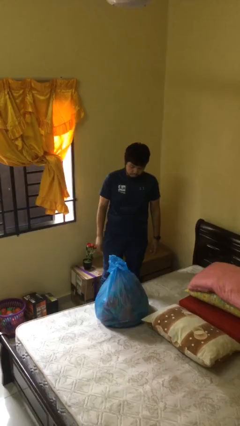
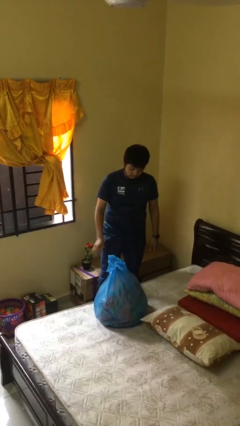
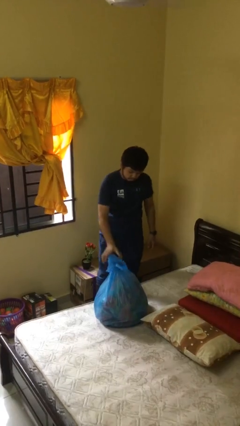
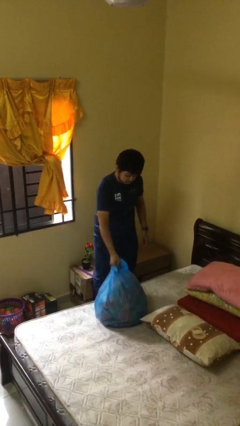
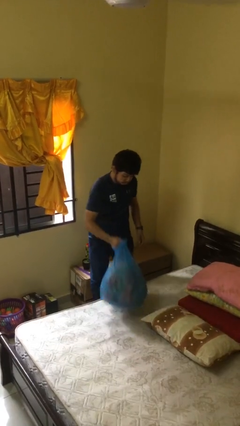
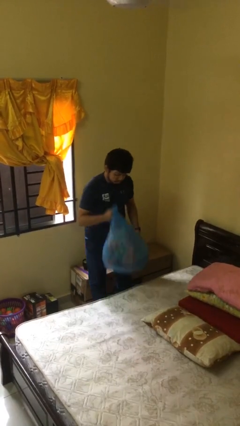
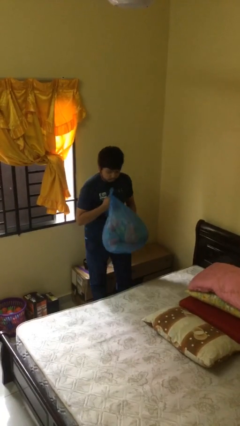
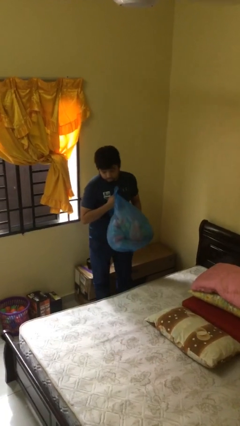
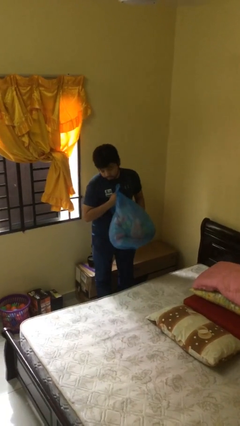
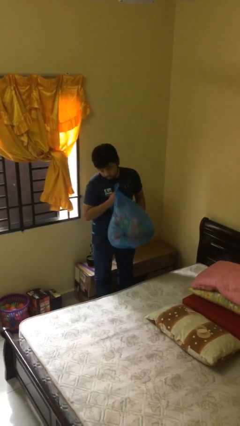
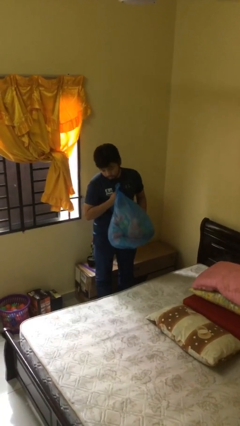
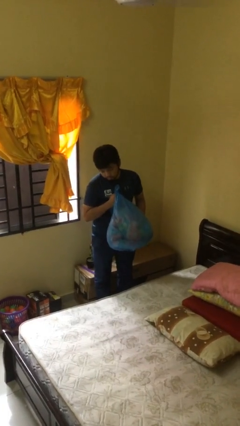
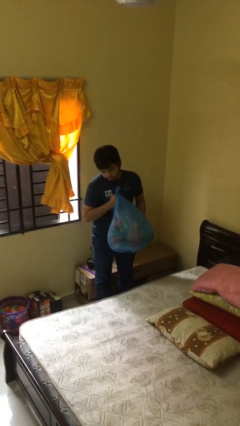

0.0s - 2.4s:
person picks up object from bed

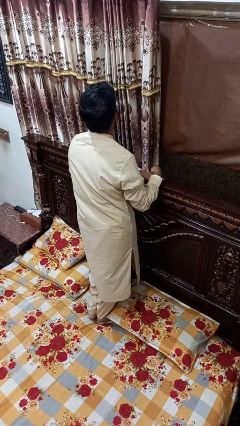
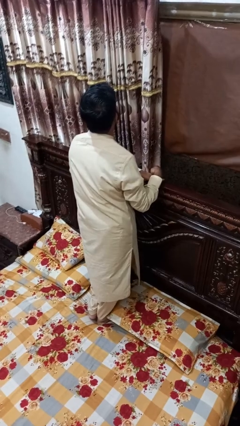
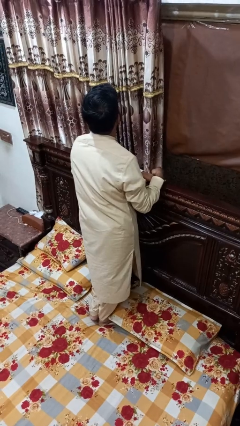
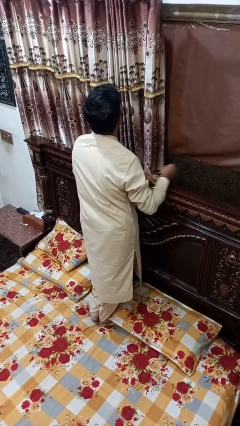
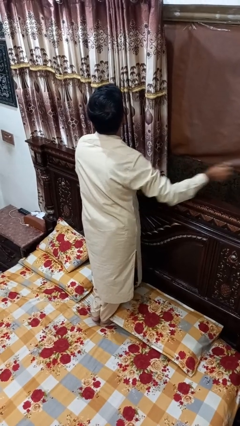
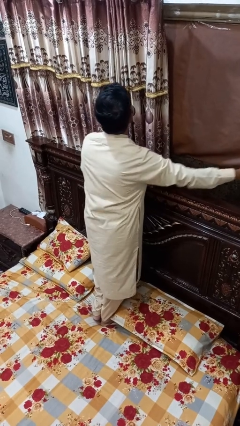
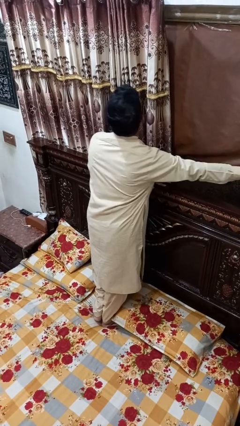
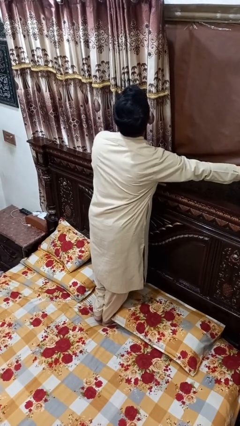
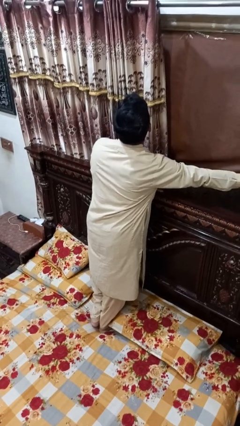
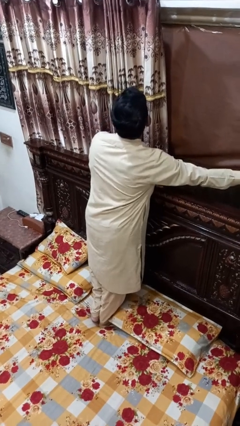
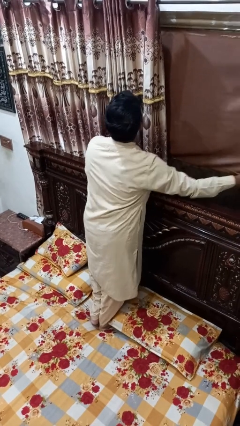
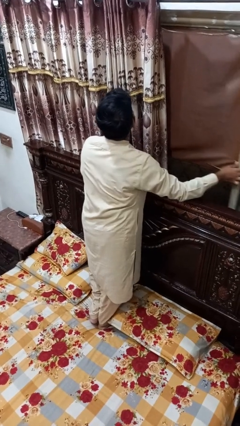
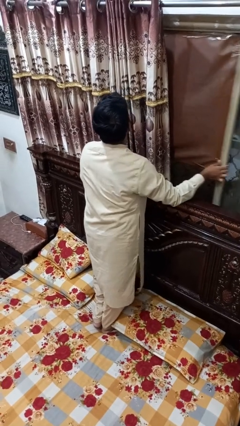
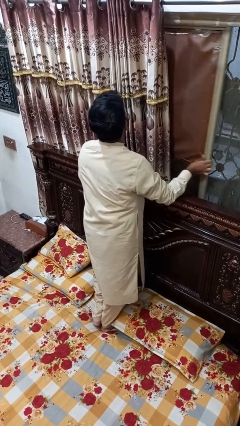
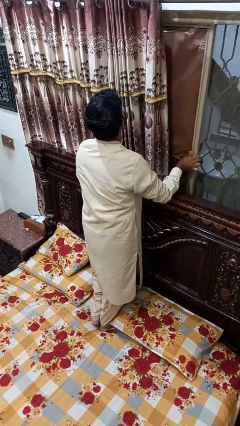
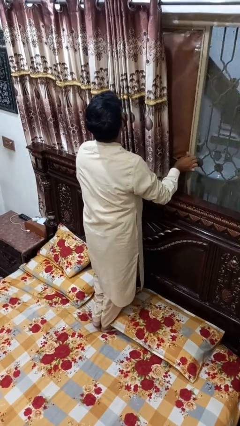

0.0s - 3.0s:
person opens home window

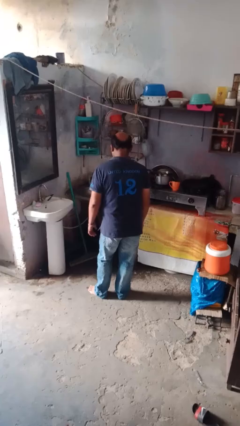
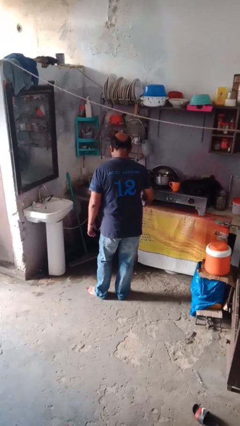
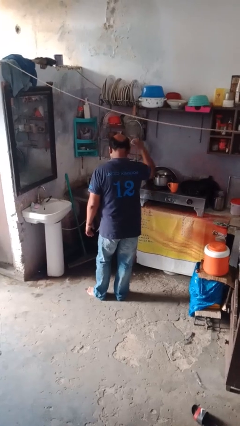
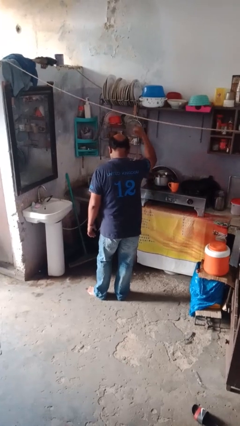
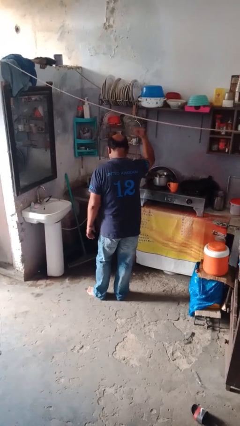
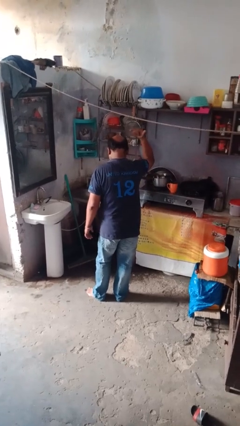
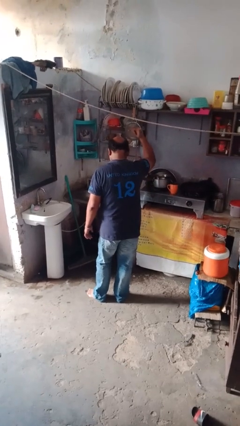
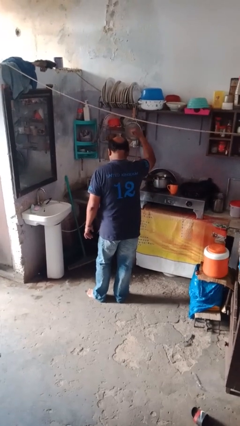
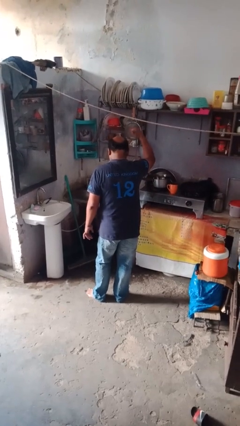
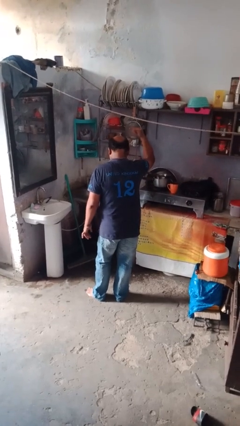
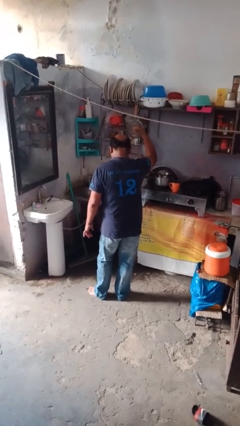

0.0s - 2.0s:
person gestures hang loose

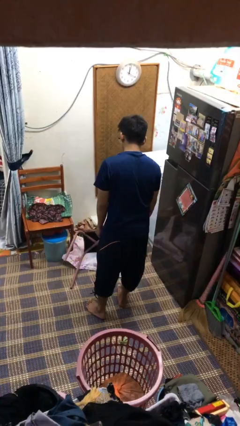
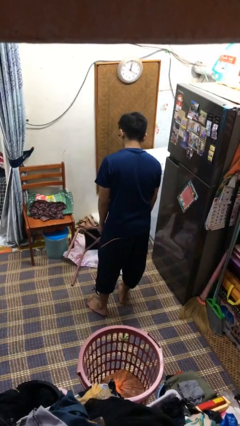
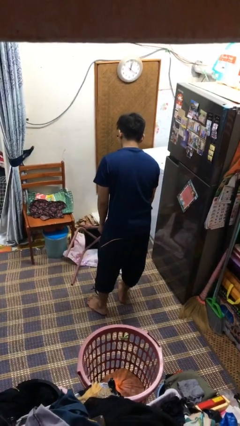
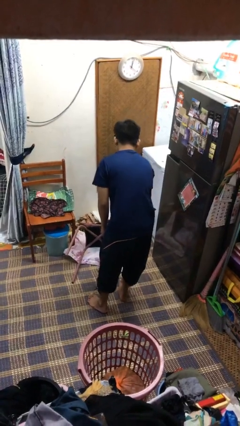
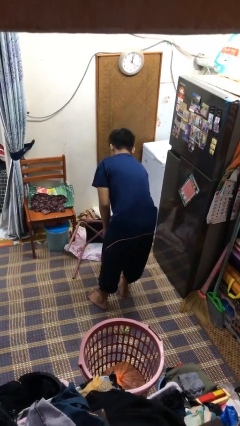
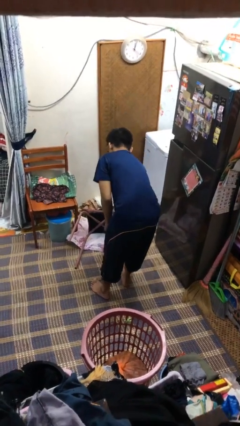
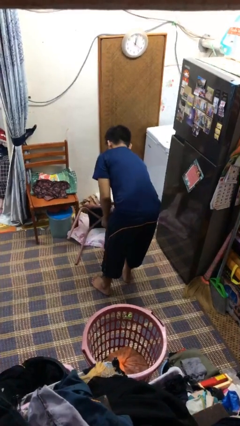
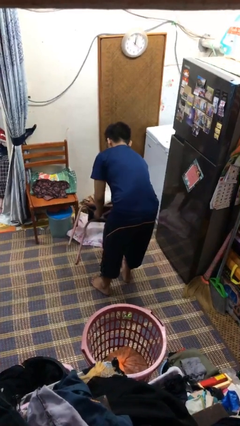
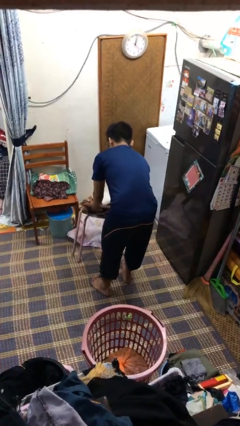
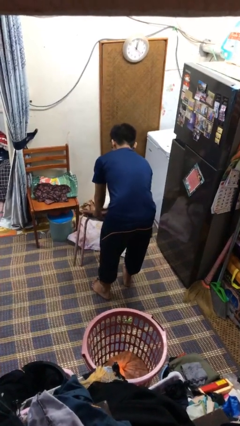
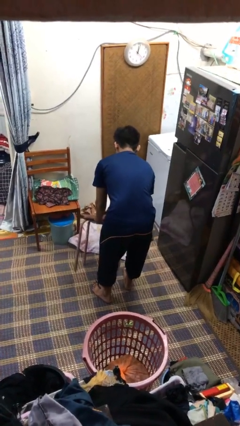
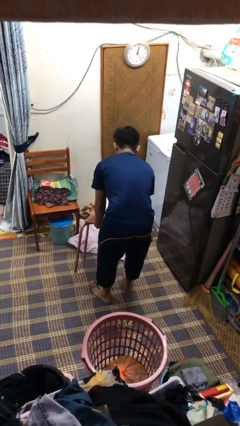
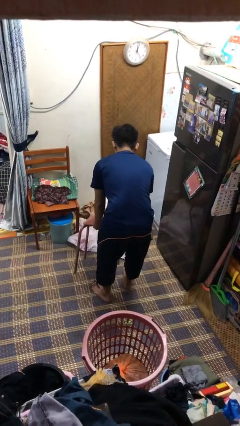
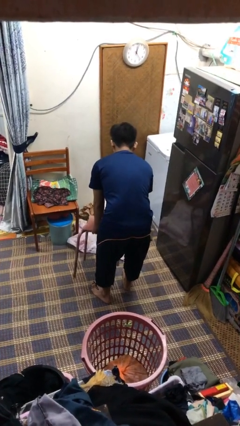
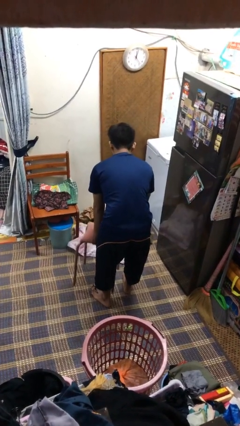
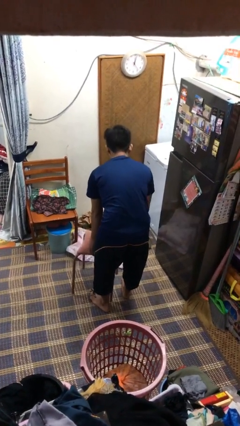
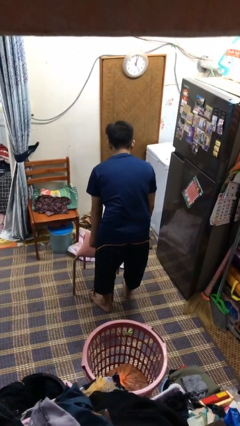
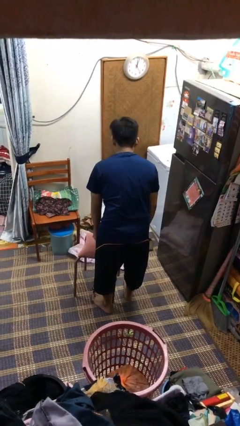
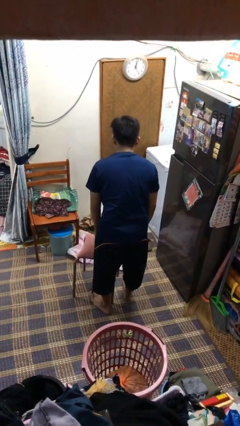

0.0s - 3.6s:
person sets upright furniture

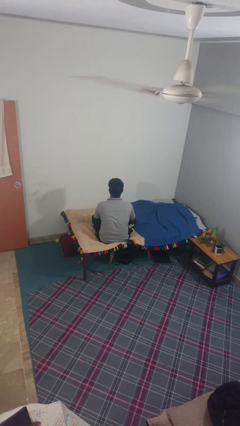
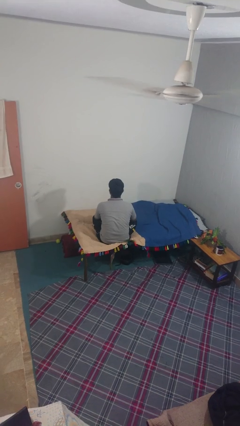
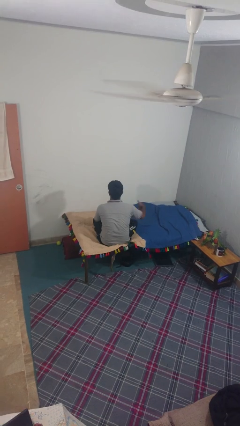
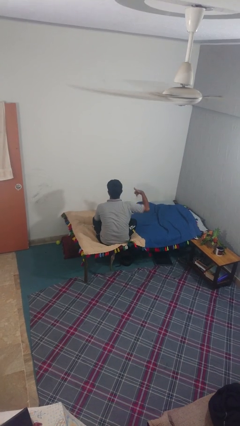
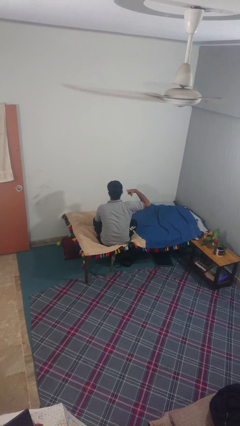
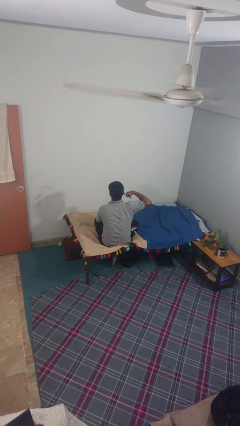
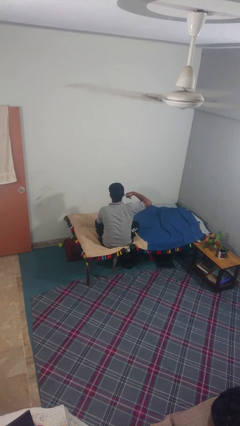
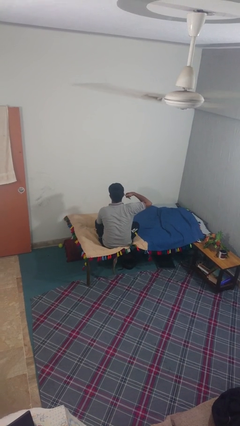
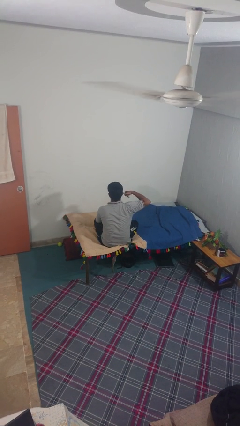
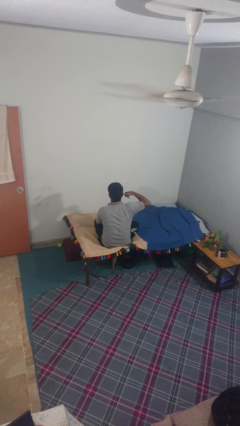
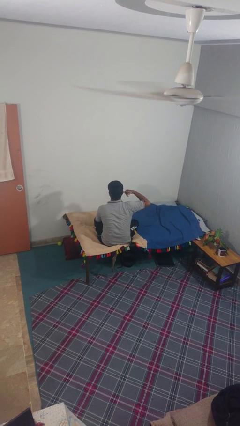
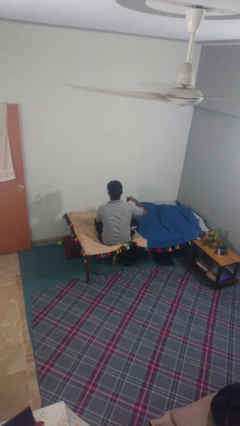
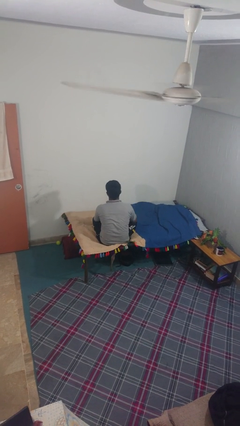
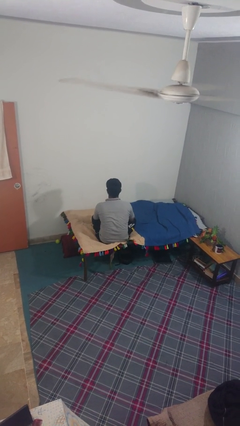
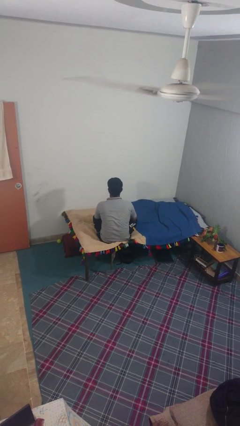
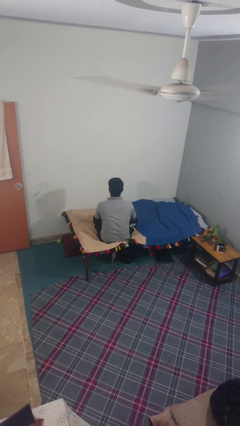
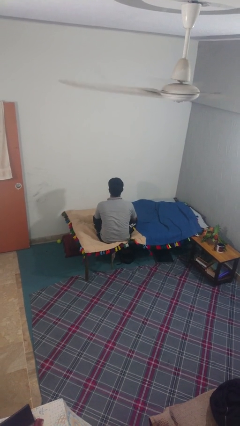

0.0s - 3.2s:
person gestures call me

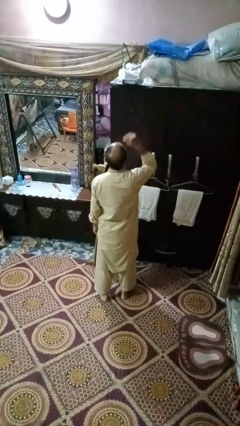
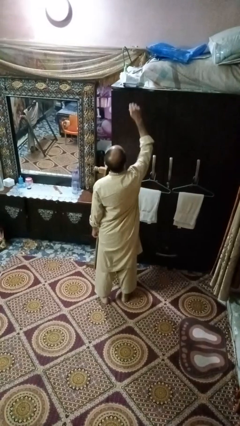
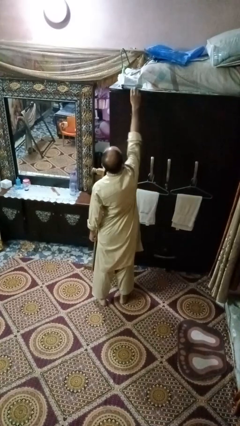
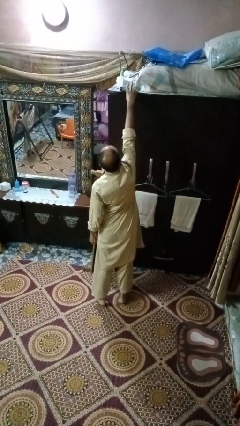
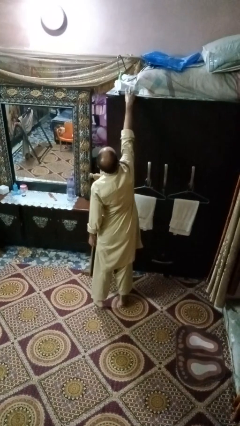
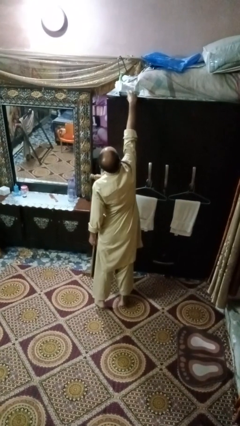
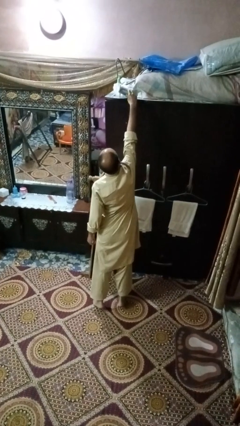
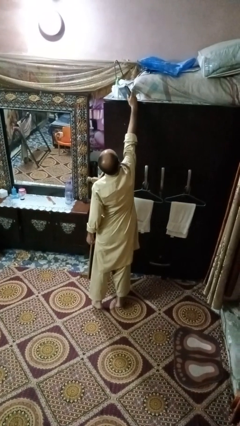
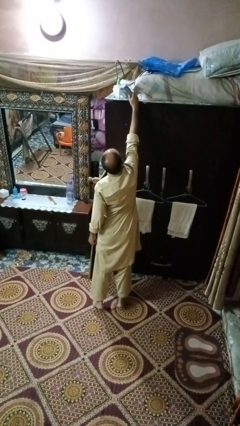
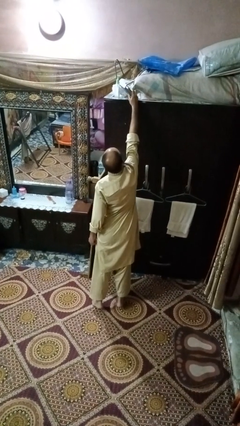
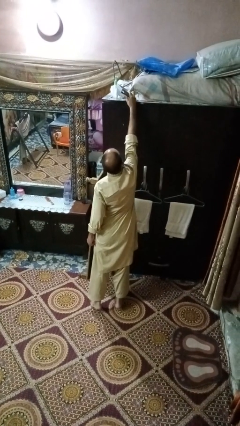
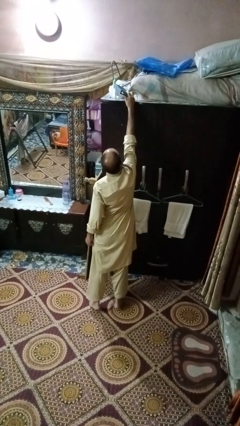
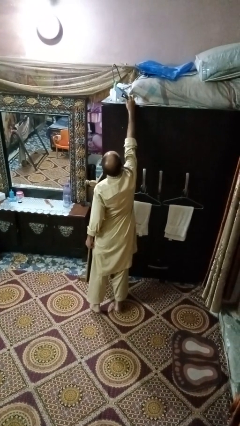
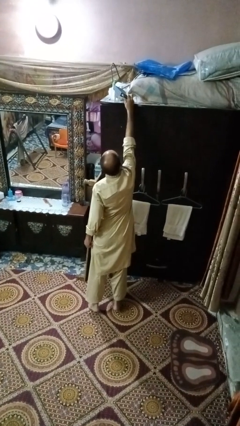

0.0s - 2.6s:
person picks up object from countertop

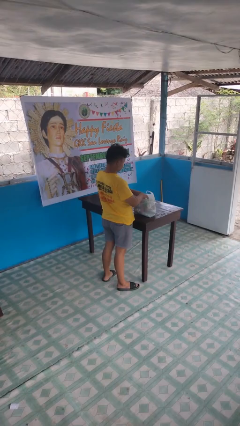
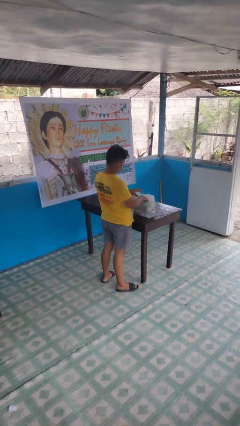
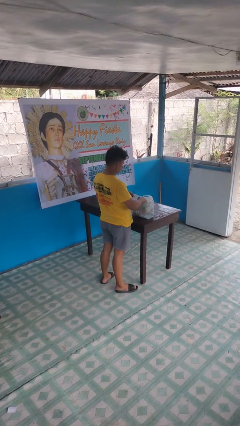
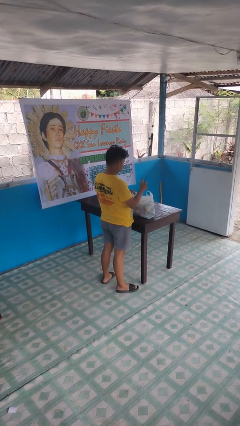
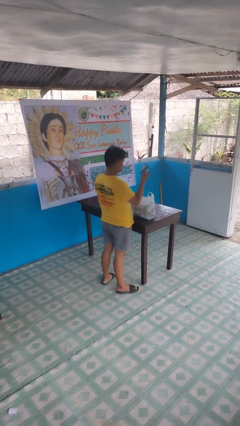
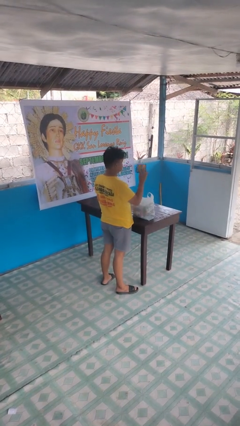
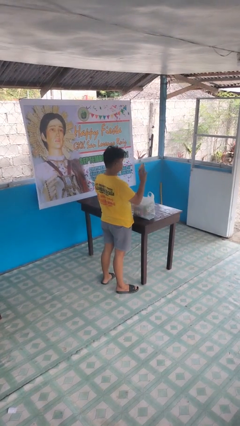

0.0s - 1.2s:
person takes object from bag
